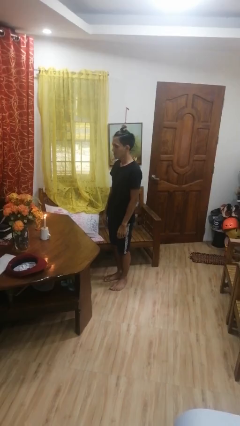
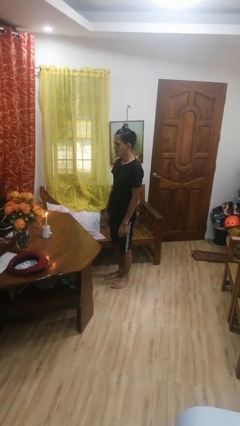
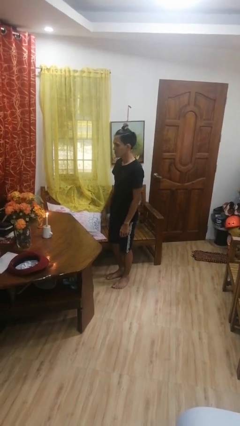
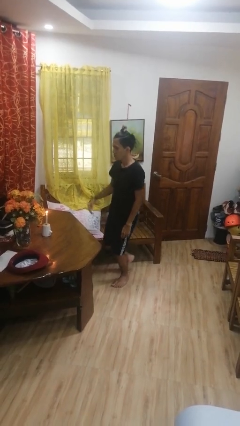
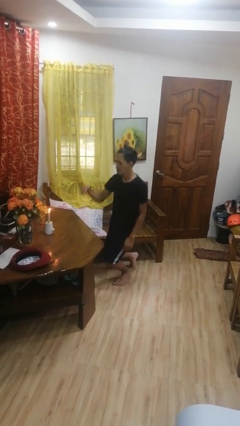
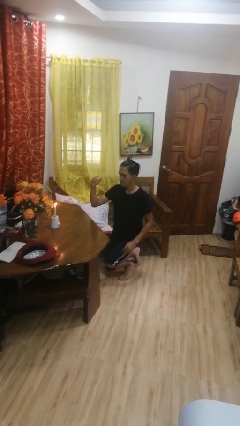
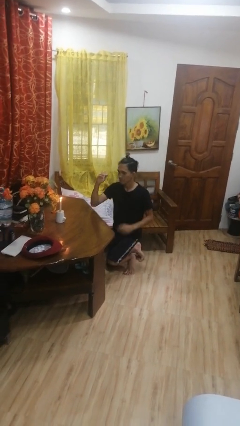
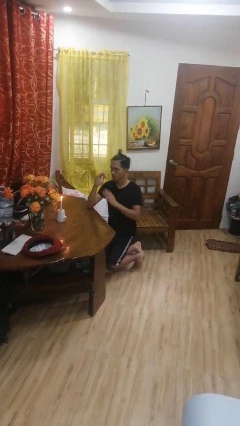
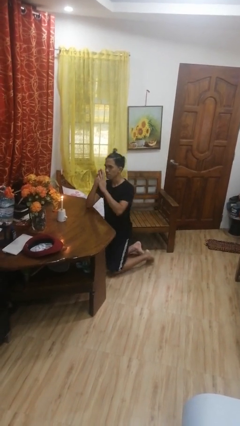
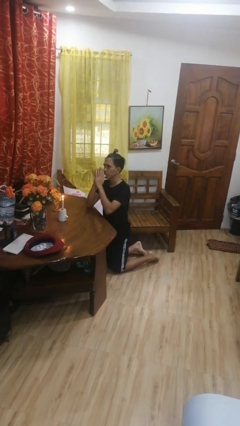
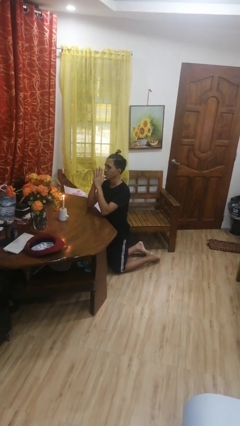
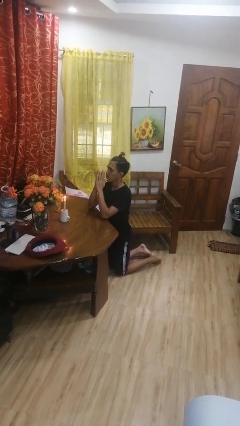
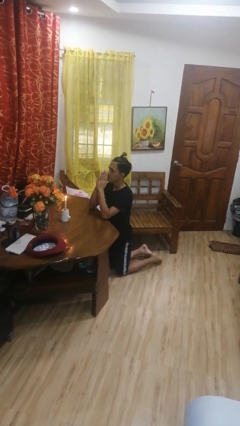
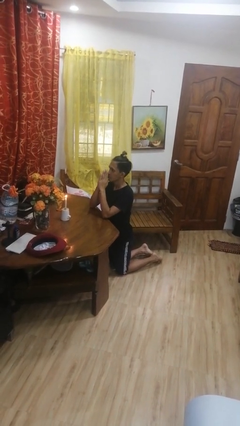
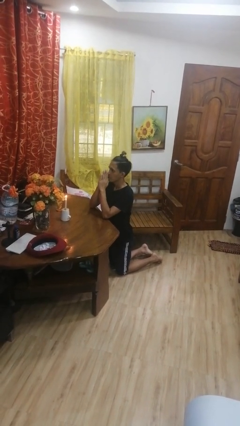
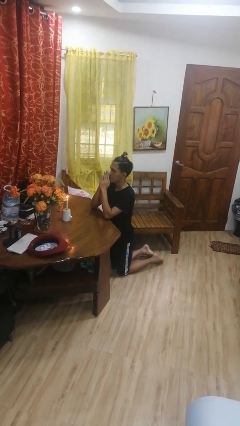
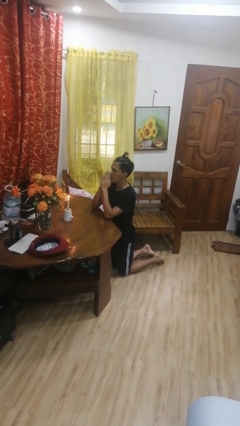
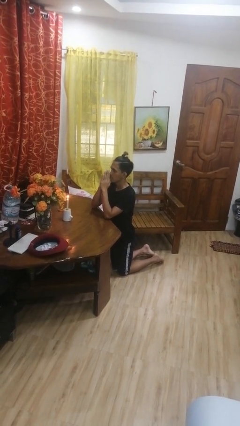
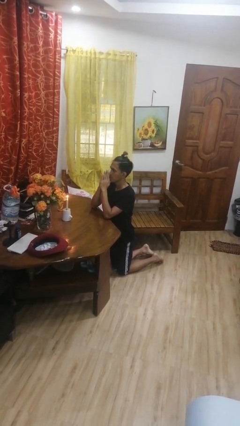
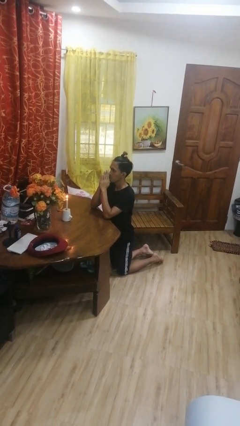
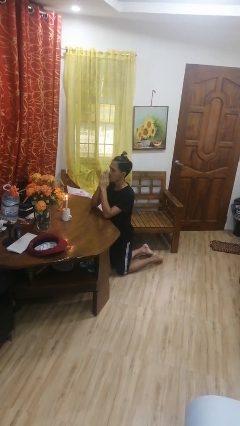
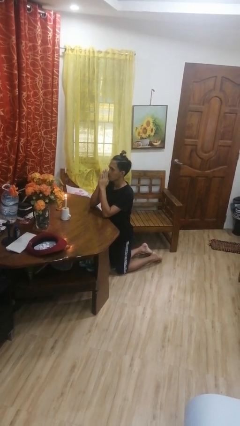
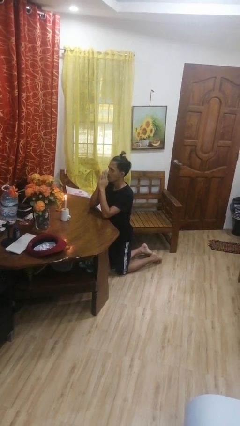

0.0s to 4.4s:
person prays

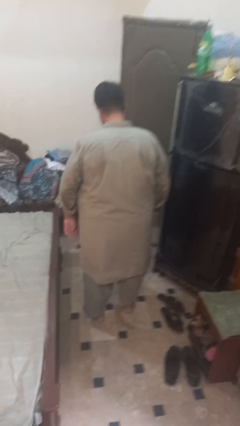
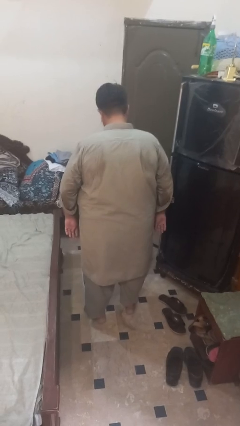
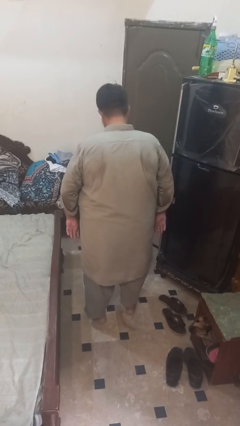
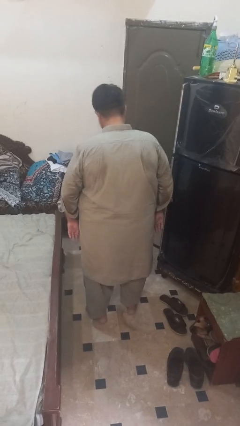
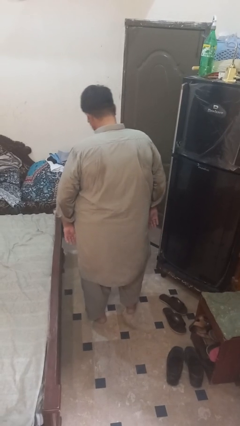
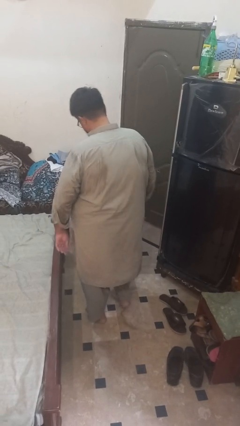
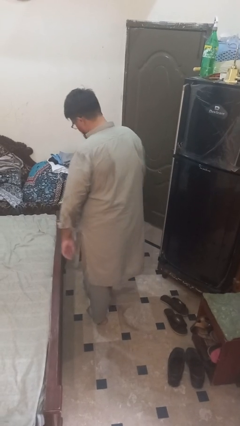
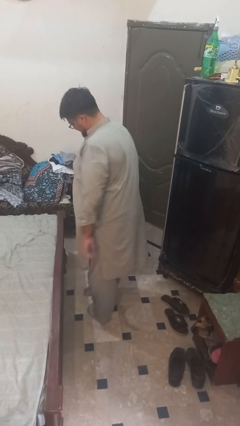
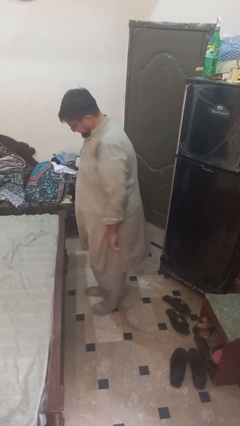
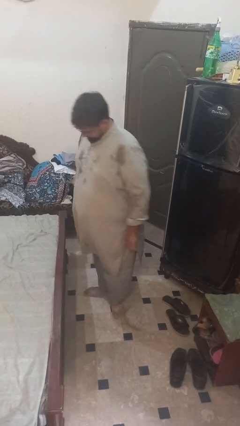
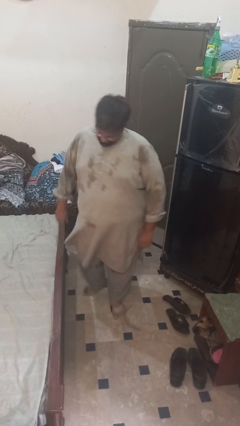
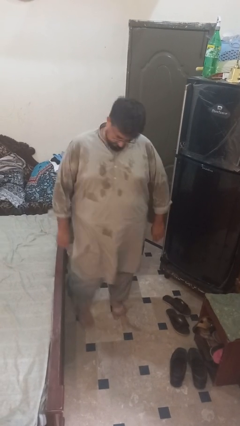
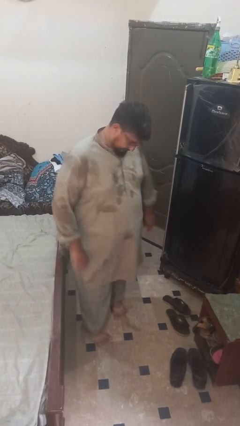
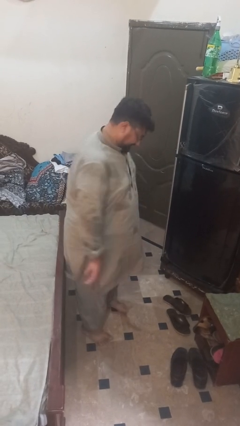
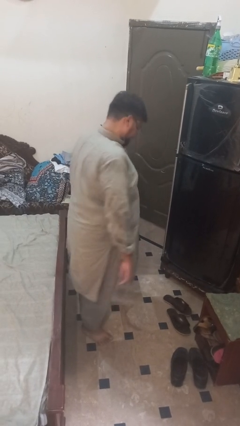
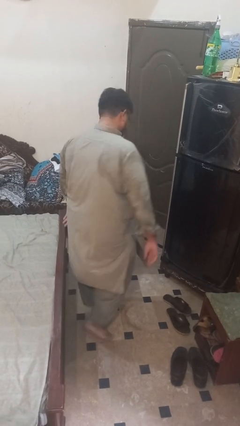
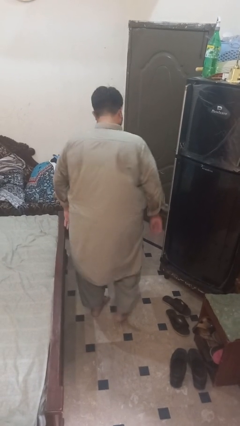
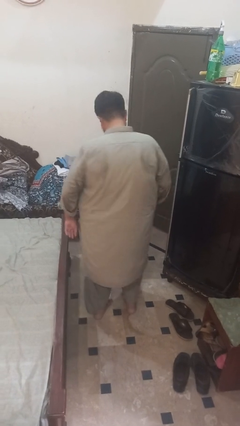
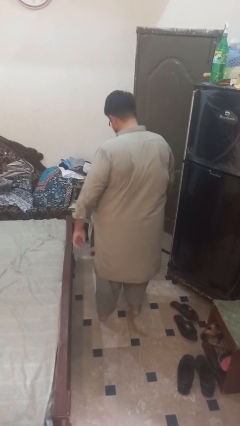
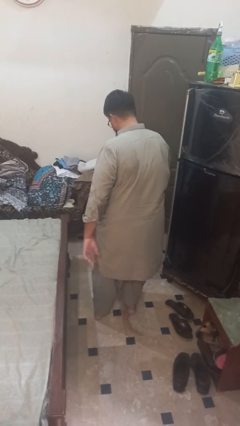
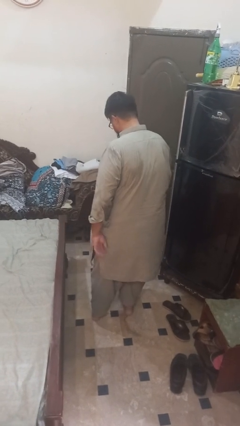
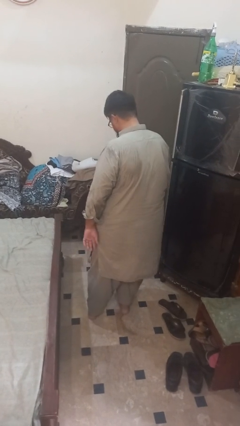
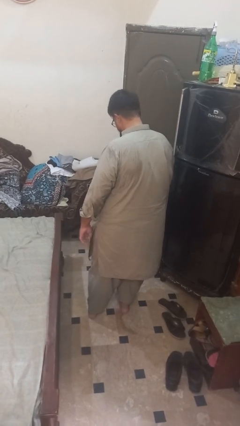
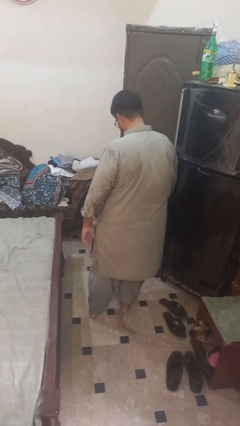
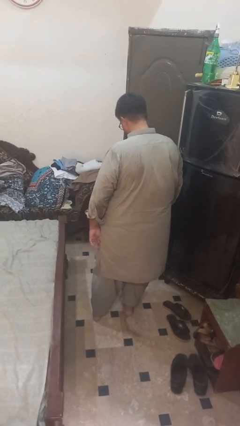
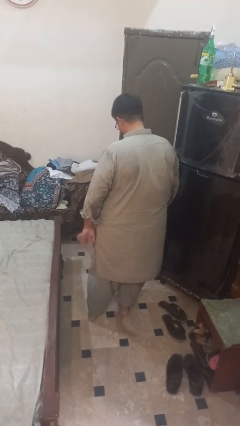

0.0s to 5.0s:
person twirls

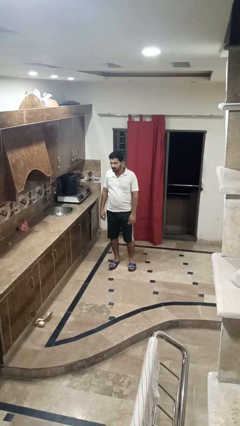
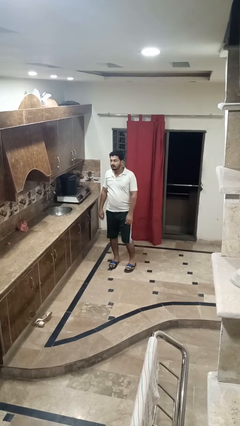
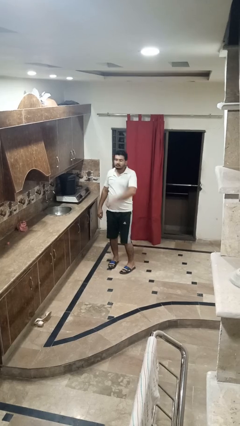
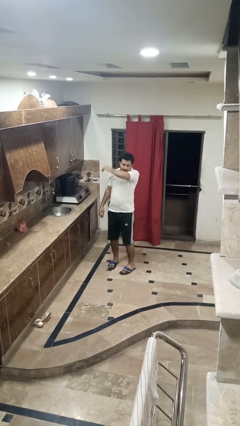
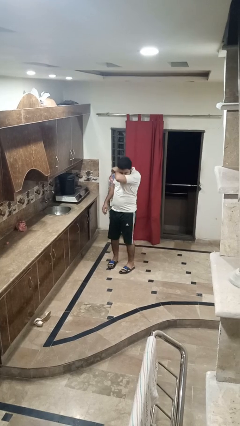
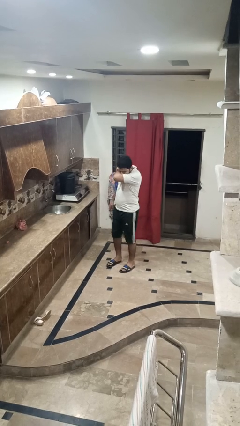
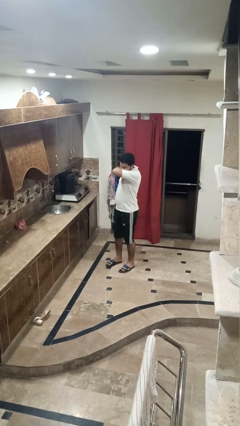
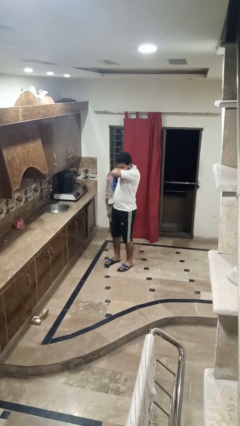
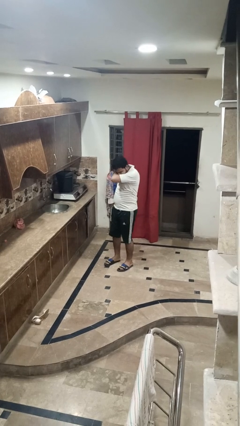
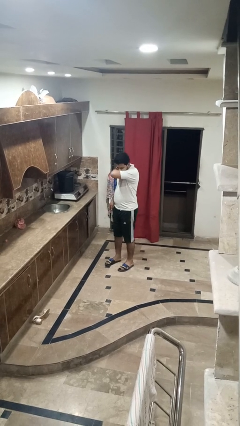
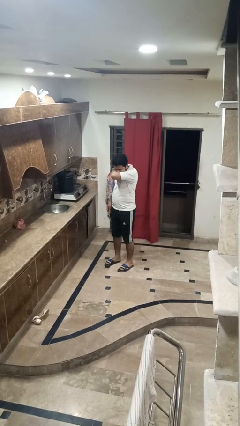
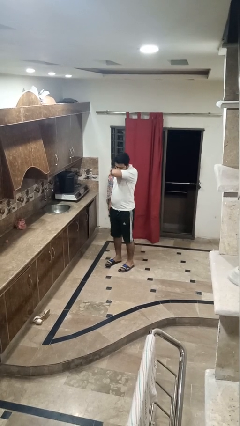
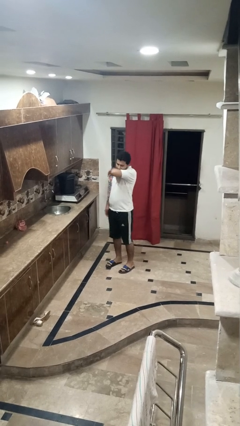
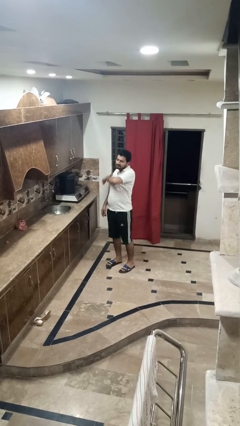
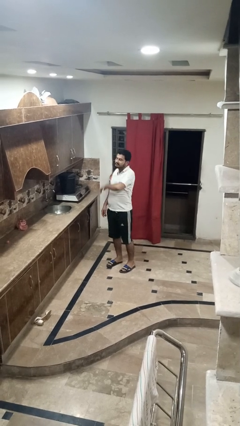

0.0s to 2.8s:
person sneezes into arm

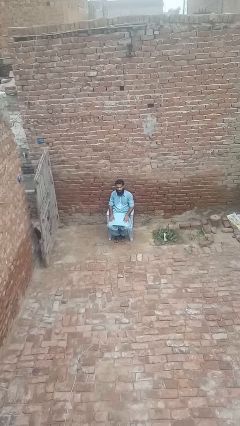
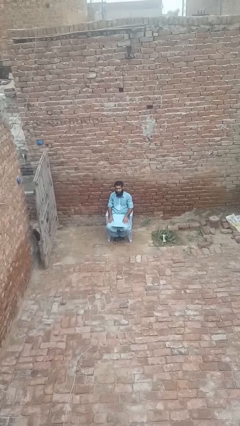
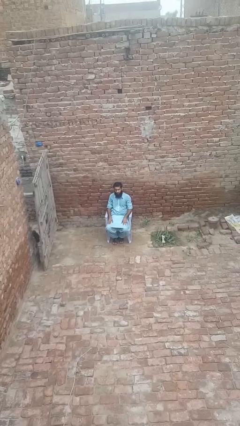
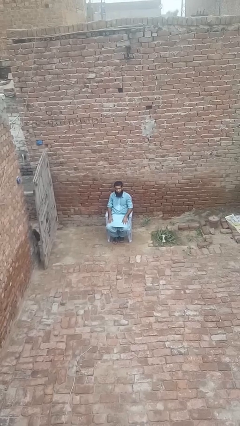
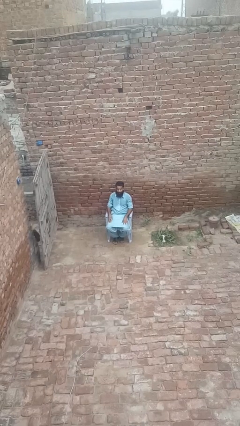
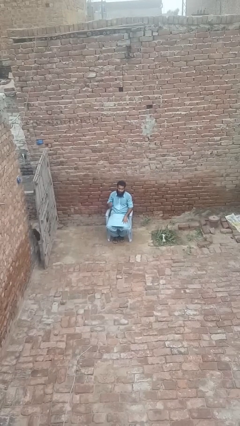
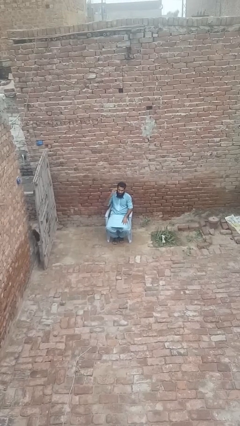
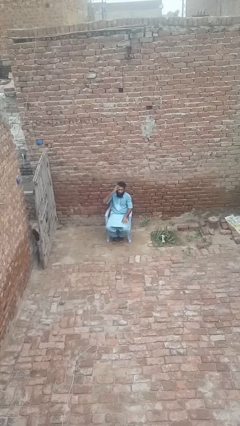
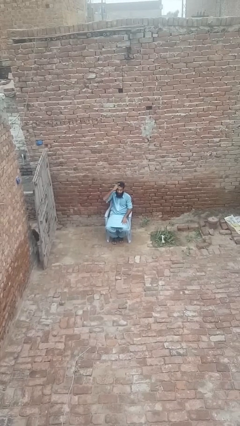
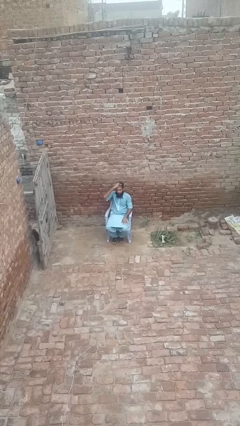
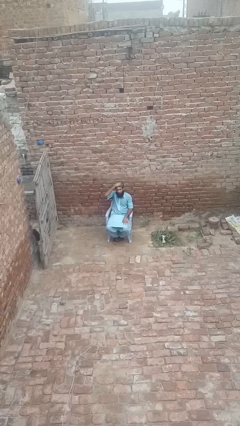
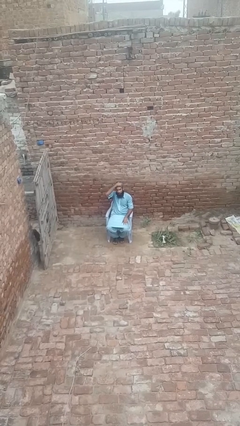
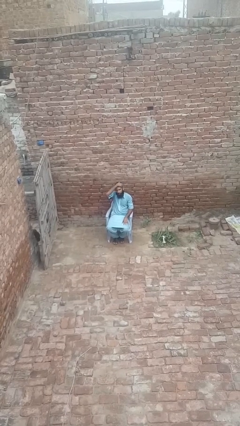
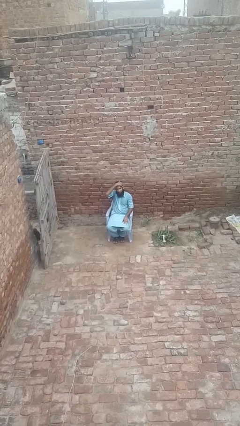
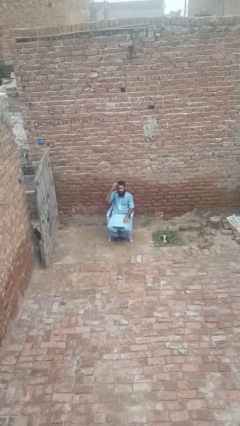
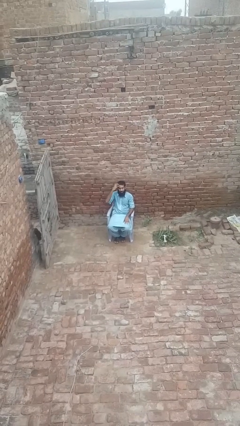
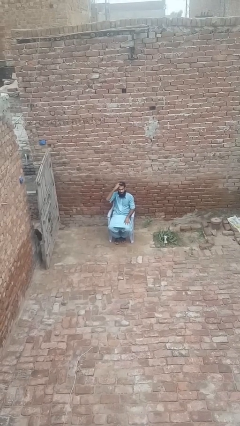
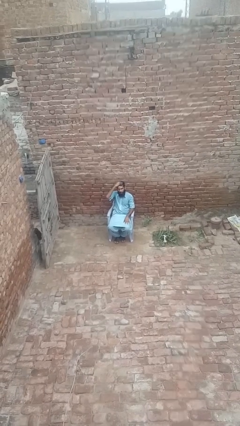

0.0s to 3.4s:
person strokes hair

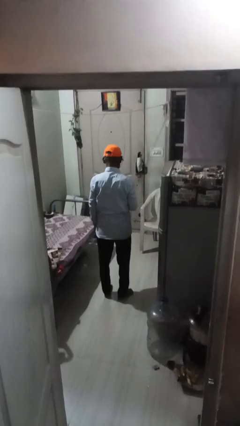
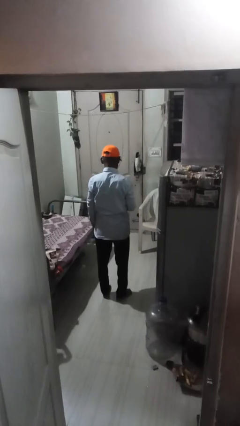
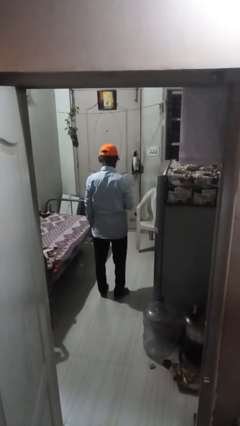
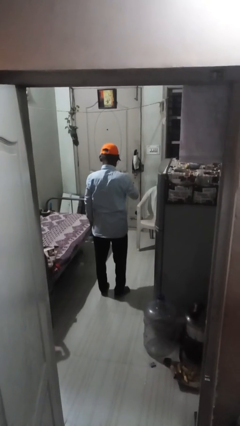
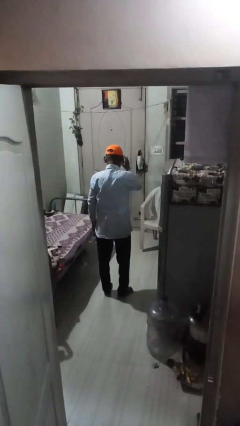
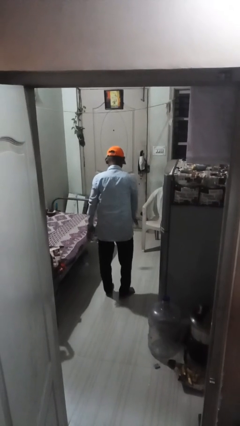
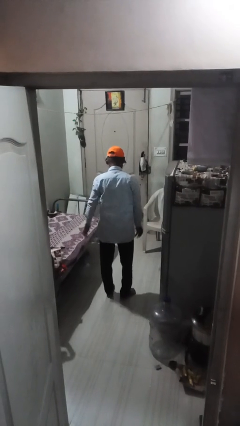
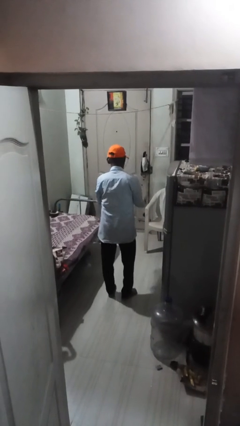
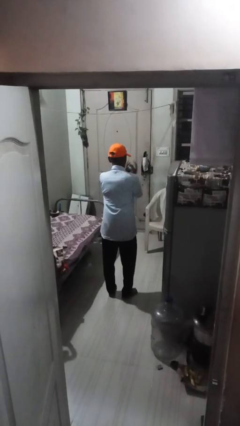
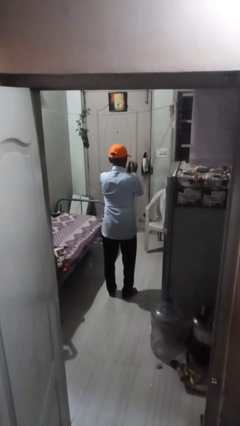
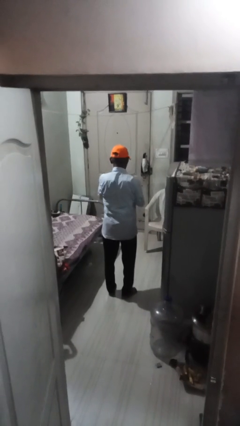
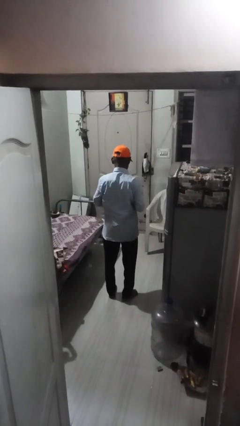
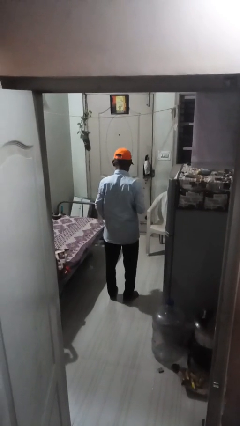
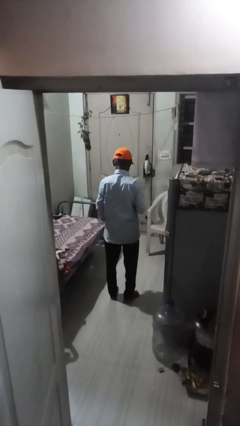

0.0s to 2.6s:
person bounces ball on floor
